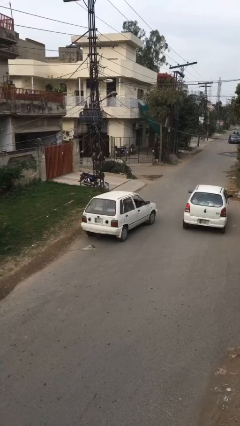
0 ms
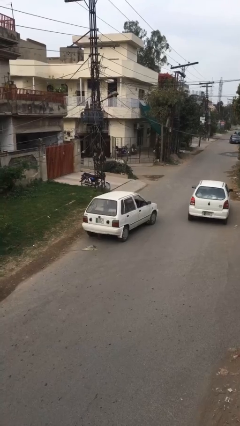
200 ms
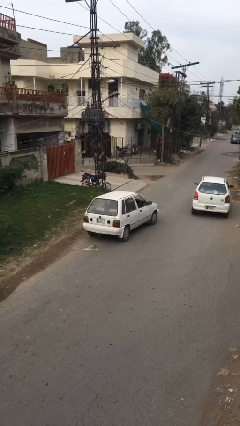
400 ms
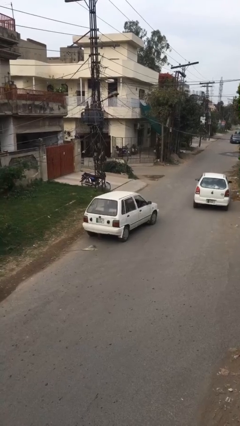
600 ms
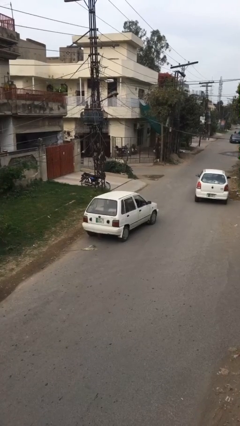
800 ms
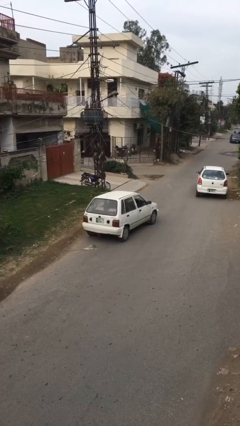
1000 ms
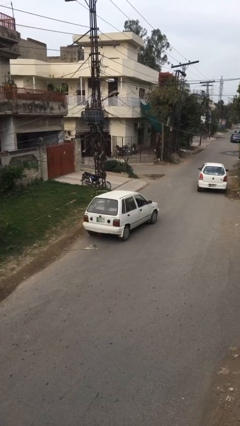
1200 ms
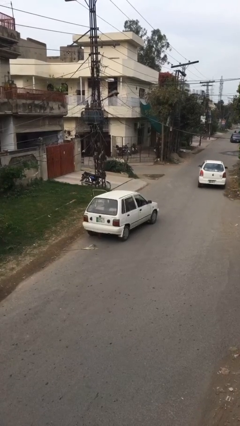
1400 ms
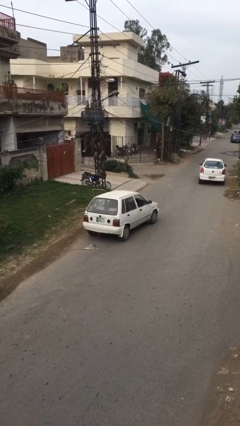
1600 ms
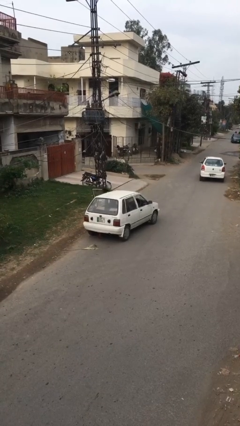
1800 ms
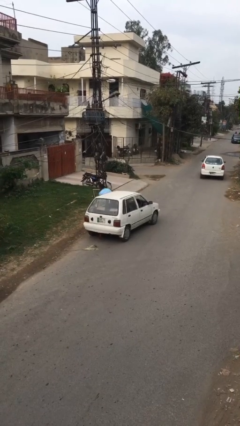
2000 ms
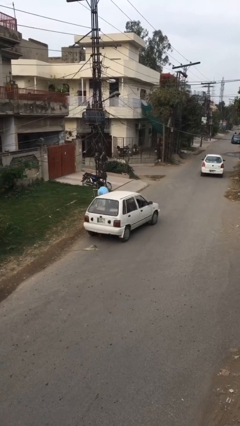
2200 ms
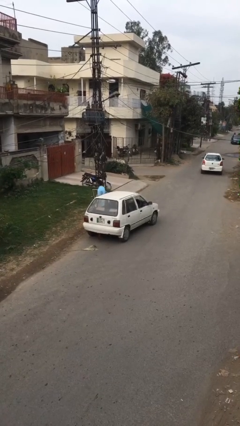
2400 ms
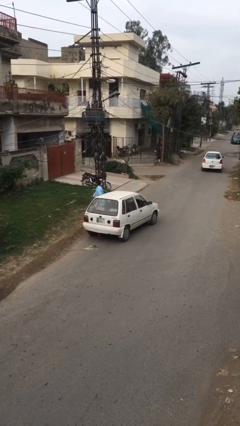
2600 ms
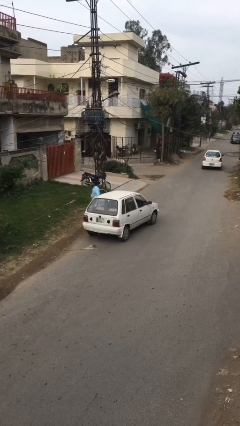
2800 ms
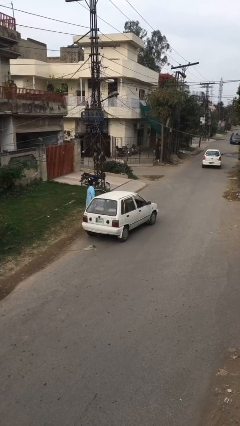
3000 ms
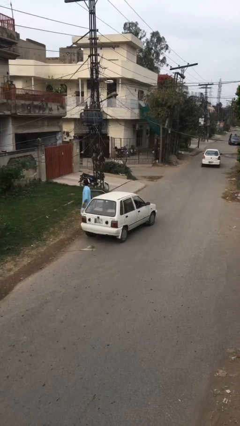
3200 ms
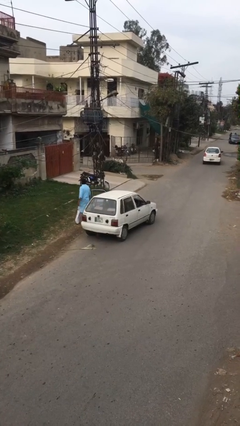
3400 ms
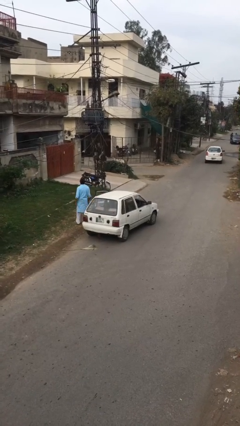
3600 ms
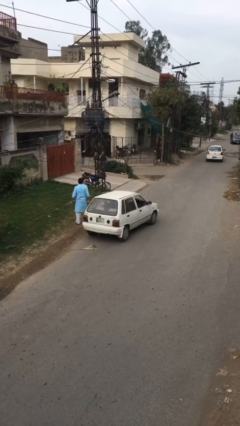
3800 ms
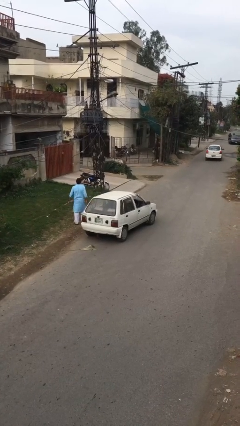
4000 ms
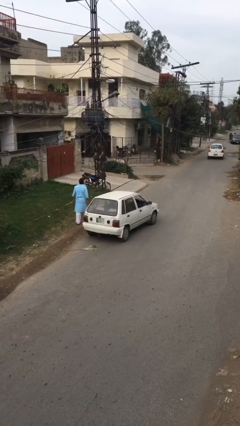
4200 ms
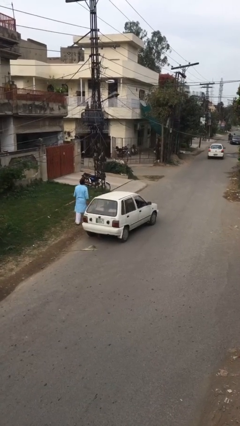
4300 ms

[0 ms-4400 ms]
car drops off person

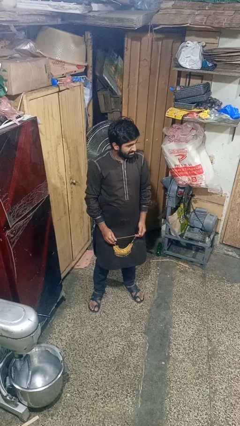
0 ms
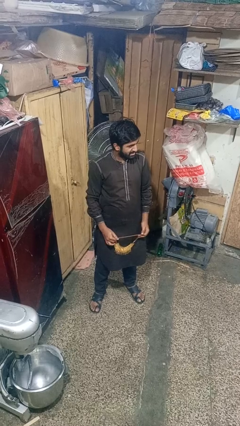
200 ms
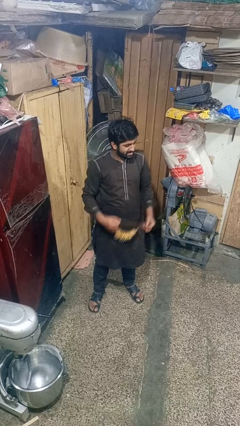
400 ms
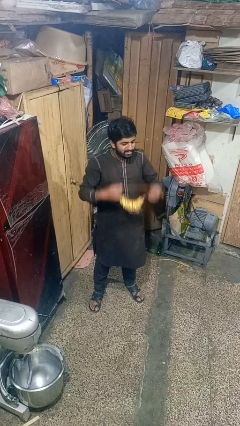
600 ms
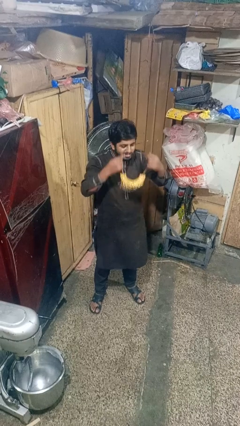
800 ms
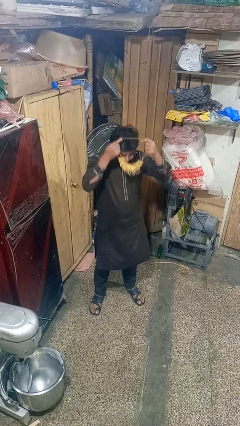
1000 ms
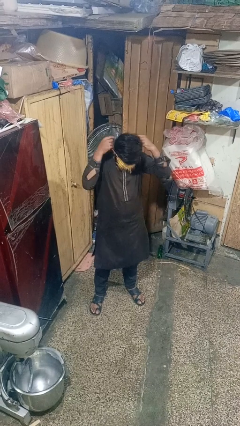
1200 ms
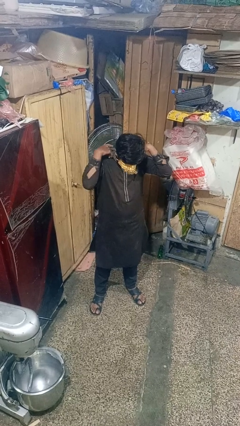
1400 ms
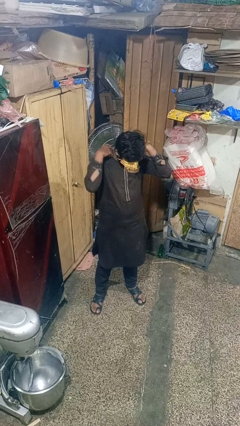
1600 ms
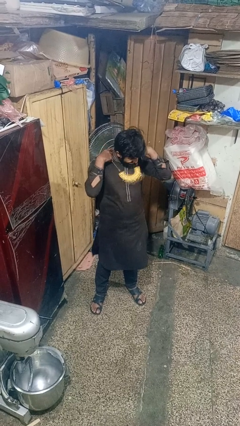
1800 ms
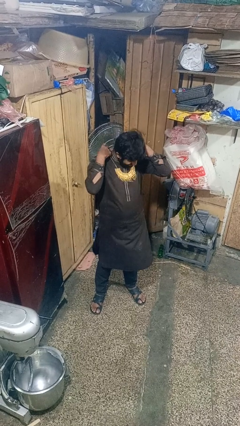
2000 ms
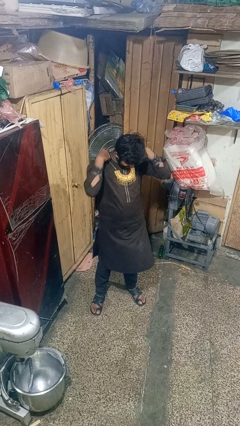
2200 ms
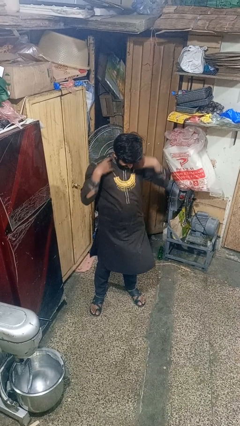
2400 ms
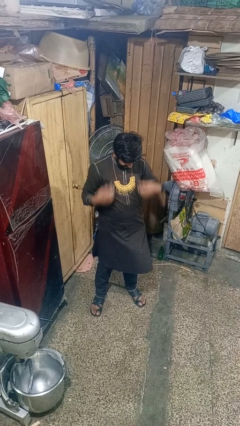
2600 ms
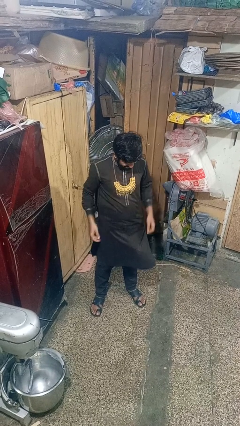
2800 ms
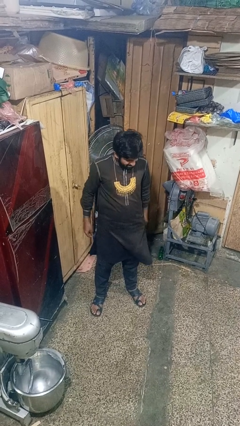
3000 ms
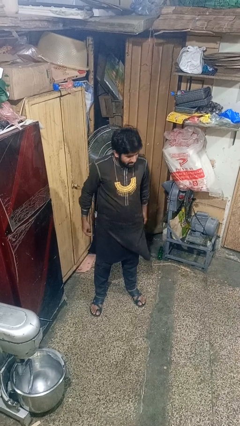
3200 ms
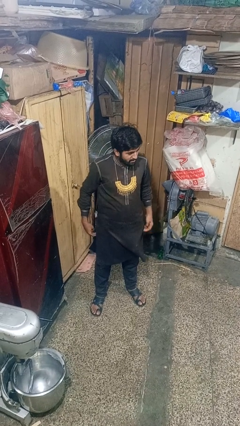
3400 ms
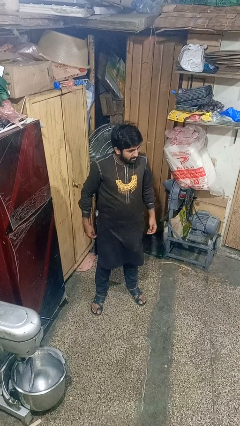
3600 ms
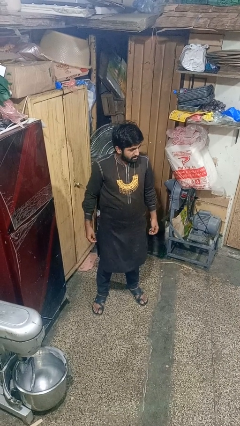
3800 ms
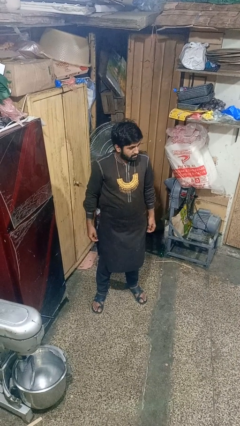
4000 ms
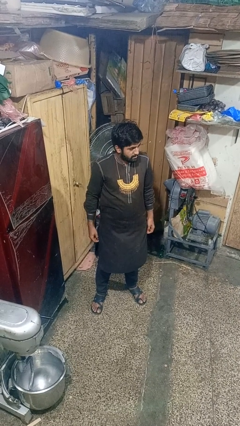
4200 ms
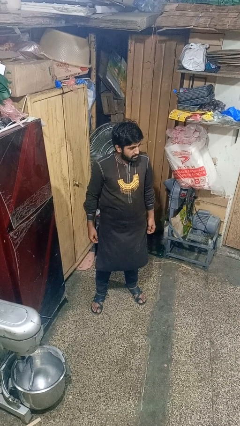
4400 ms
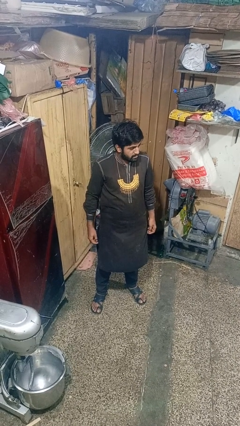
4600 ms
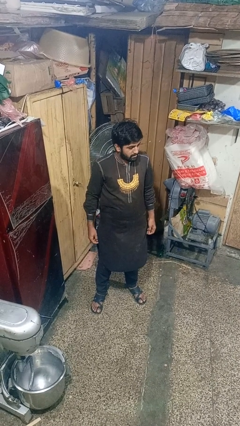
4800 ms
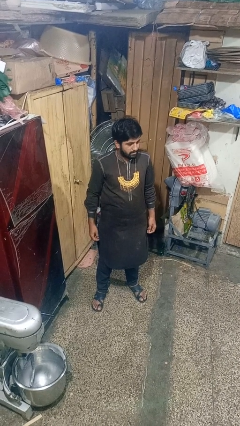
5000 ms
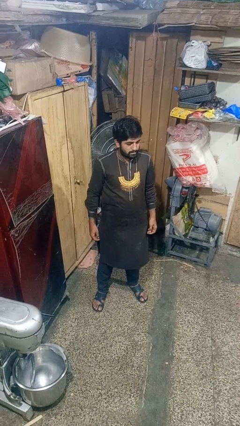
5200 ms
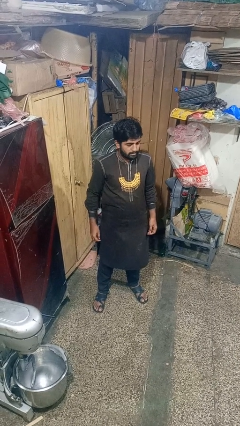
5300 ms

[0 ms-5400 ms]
person puts on necklace

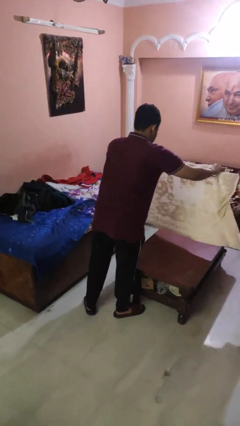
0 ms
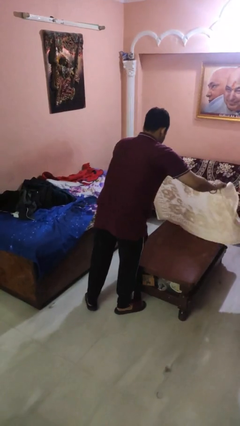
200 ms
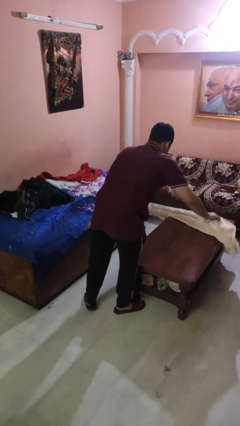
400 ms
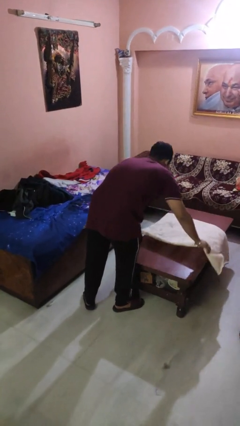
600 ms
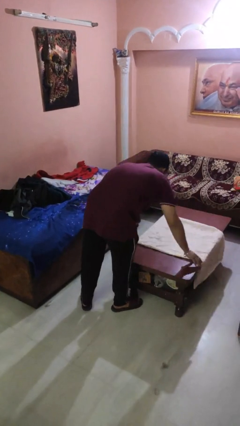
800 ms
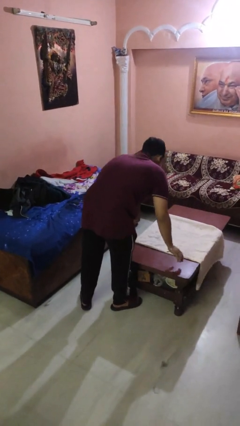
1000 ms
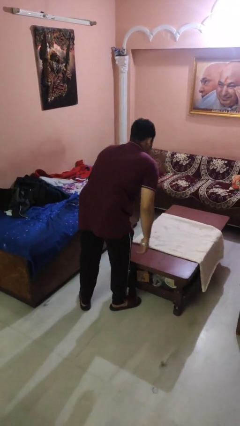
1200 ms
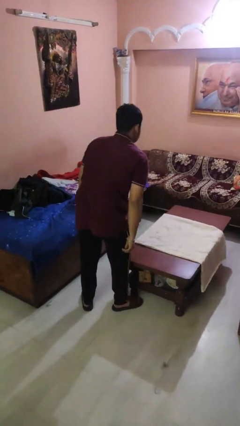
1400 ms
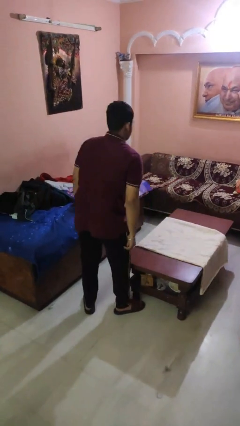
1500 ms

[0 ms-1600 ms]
person spreads tablecloth

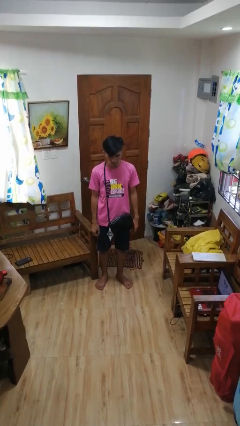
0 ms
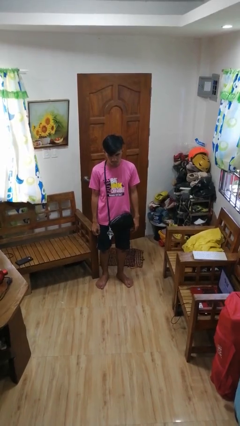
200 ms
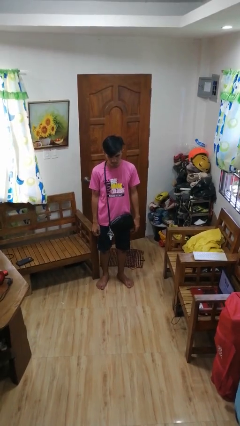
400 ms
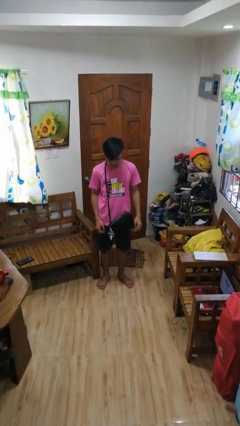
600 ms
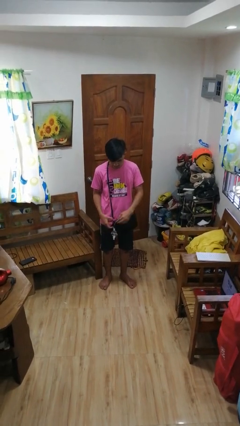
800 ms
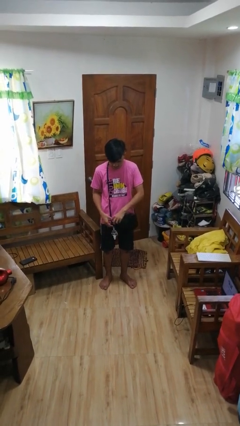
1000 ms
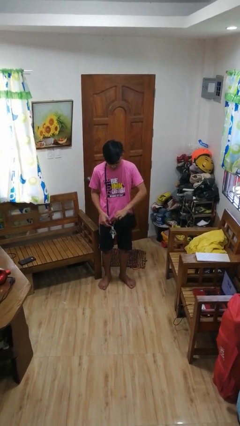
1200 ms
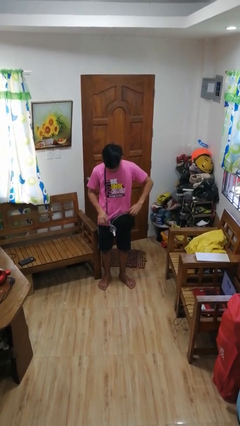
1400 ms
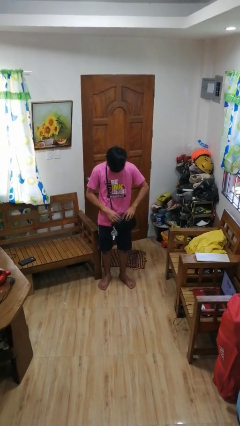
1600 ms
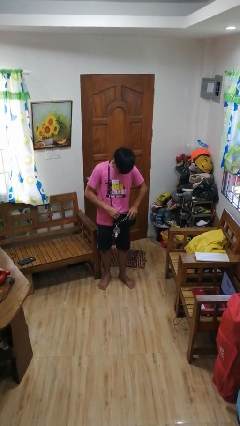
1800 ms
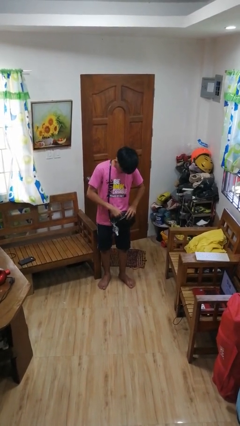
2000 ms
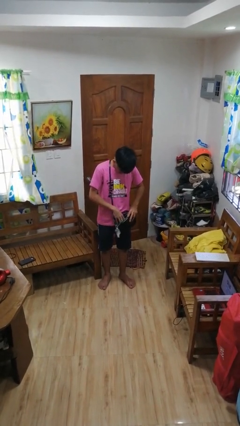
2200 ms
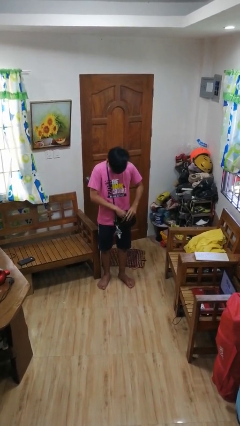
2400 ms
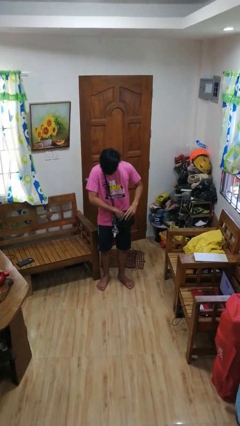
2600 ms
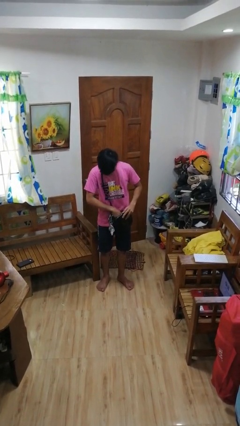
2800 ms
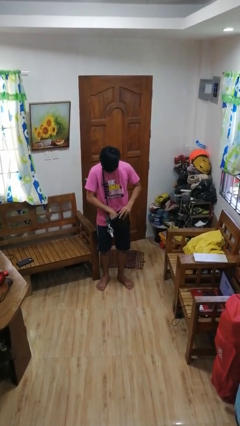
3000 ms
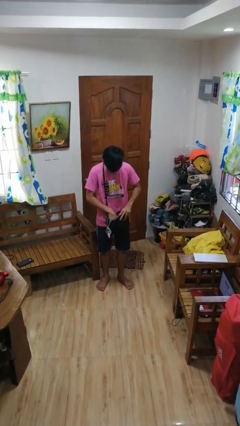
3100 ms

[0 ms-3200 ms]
person searches in purse

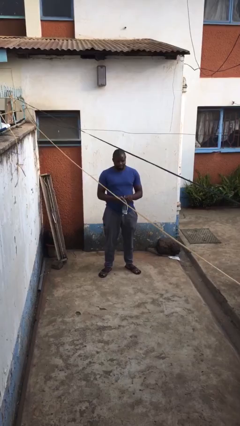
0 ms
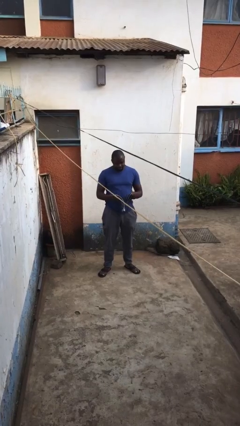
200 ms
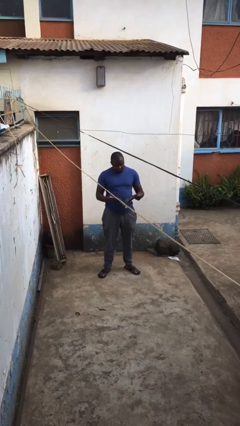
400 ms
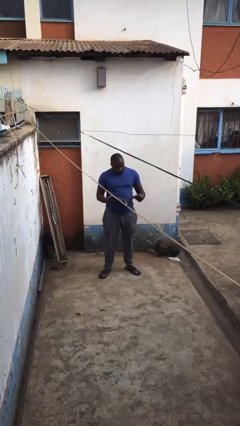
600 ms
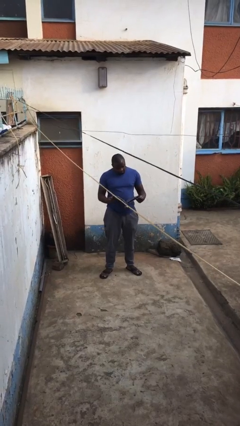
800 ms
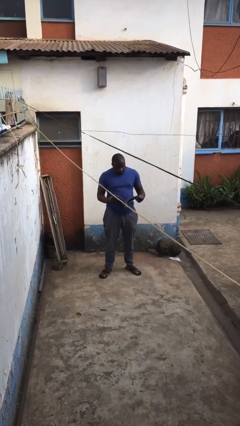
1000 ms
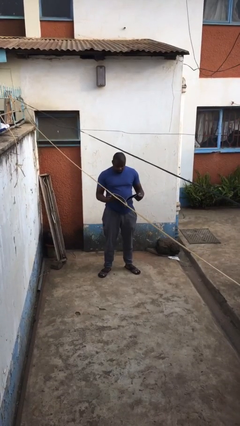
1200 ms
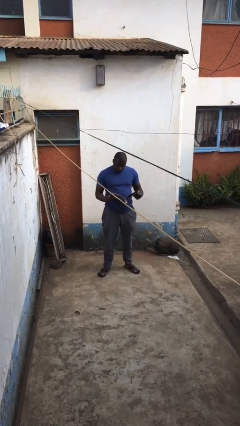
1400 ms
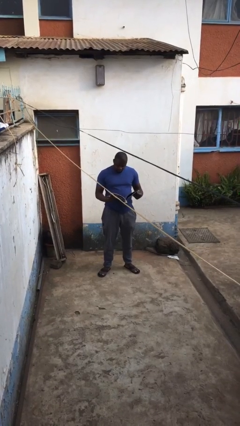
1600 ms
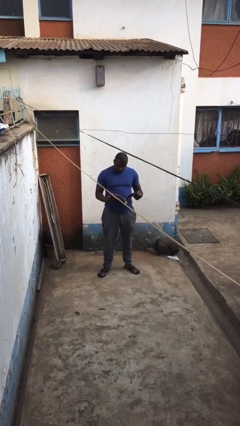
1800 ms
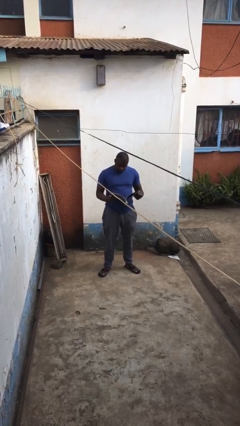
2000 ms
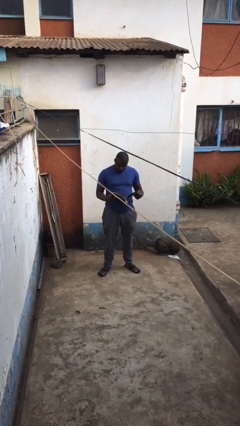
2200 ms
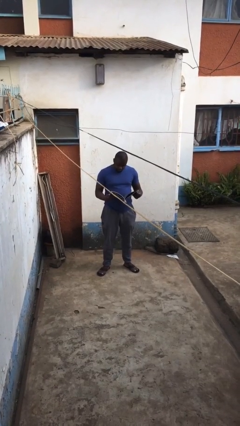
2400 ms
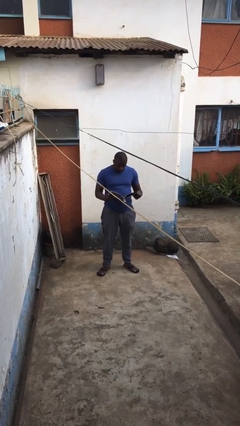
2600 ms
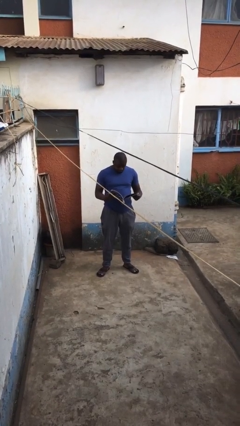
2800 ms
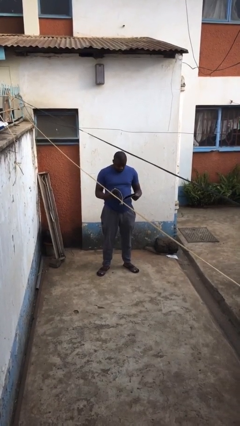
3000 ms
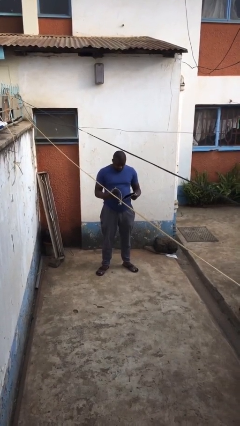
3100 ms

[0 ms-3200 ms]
person reads magazine
